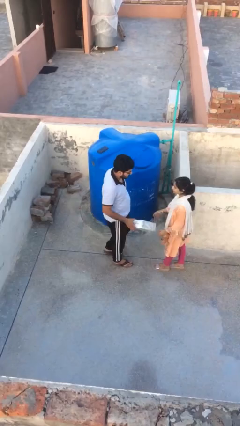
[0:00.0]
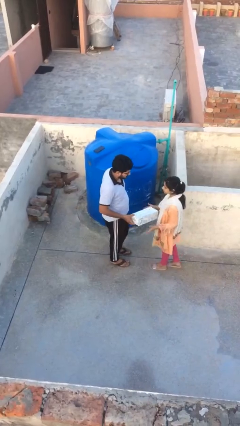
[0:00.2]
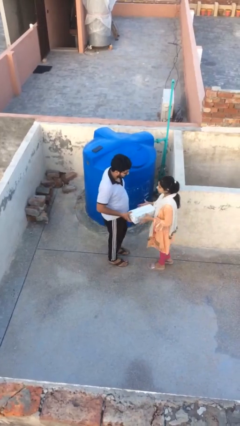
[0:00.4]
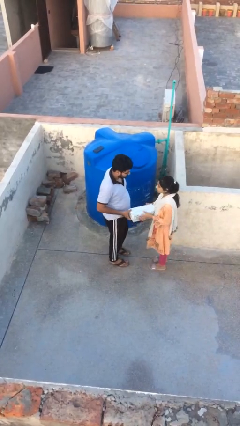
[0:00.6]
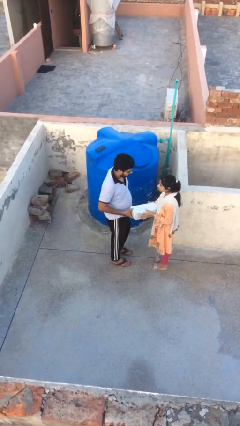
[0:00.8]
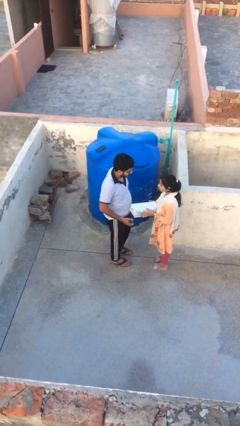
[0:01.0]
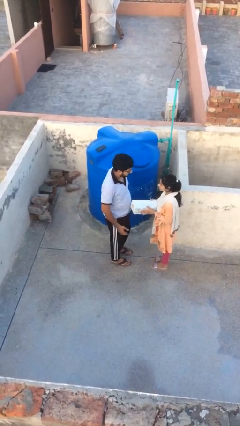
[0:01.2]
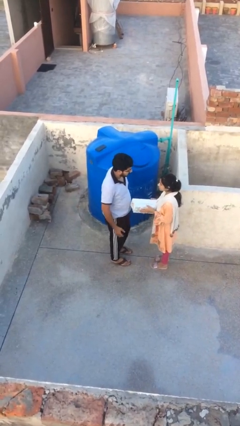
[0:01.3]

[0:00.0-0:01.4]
person transfers object to person

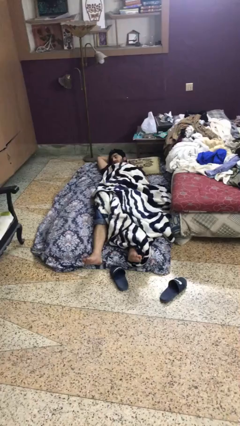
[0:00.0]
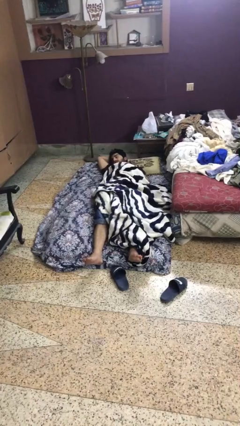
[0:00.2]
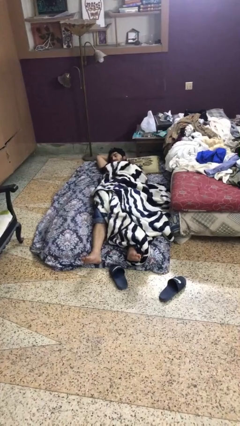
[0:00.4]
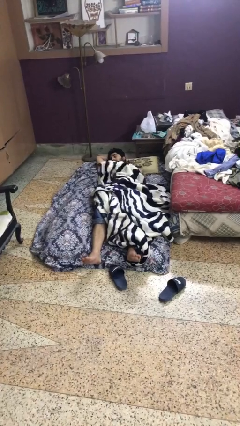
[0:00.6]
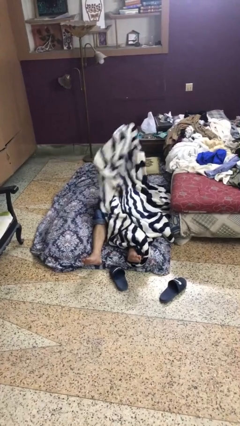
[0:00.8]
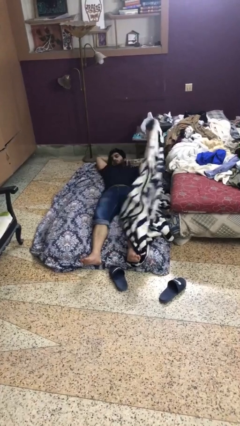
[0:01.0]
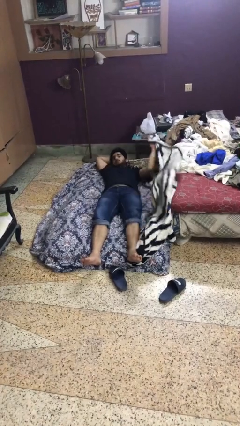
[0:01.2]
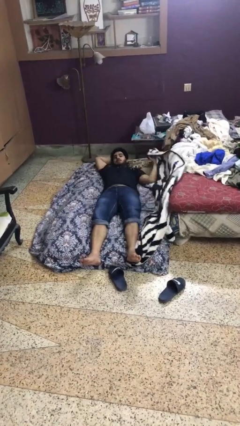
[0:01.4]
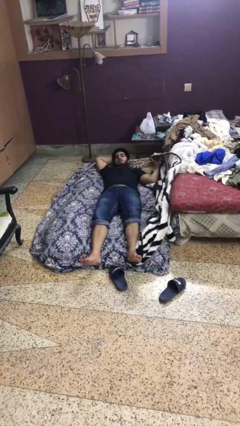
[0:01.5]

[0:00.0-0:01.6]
person uncovers with blanket

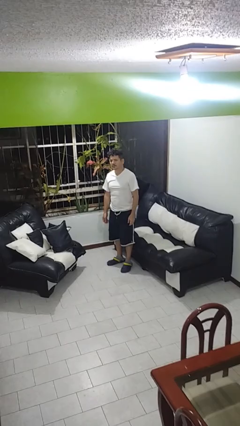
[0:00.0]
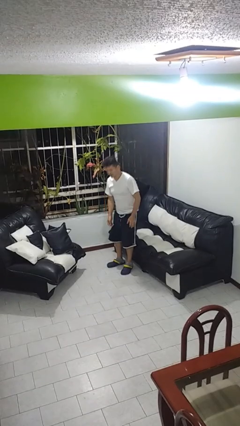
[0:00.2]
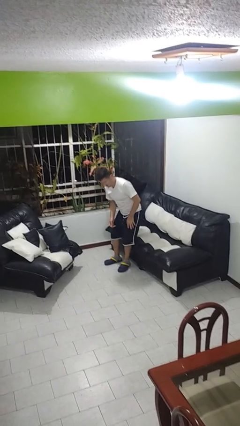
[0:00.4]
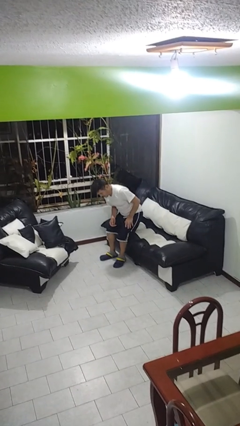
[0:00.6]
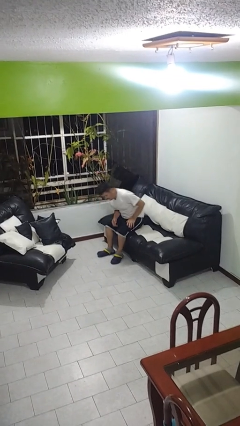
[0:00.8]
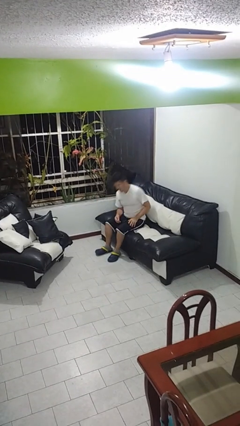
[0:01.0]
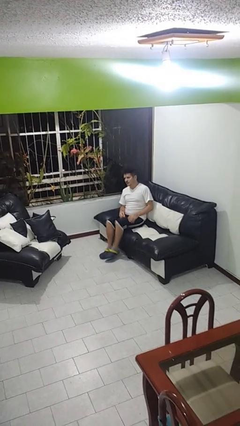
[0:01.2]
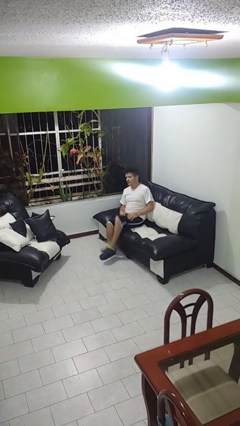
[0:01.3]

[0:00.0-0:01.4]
person lies down on couch

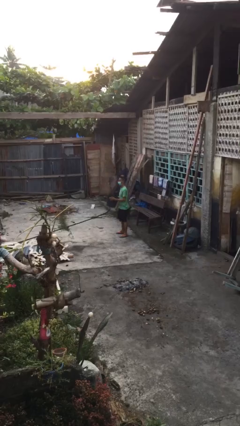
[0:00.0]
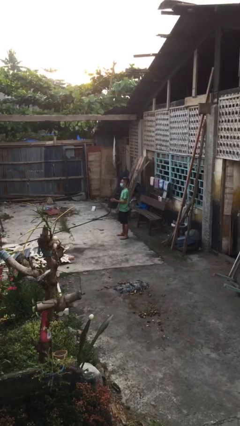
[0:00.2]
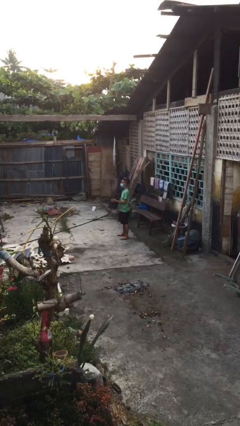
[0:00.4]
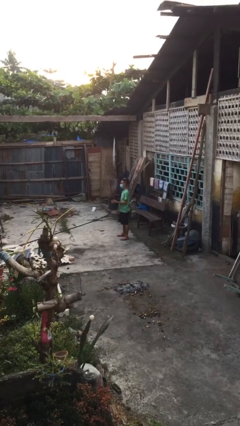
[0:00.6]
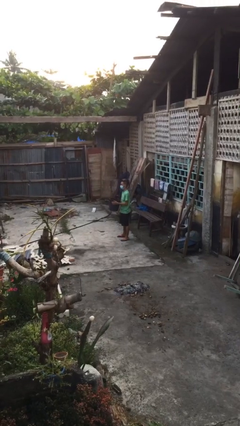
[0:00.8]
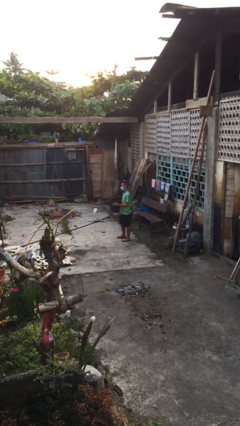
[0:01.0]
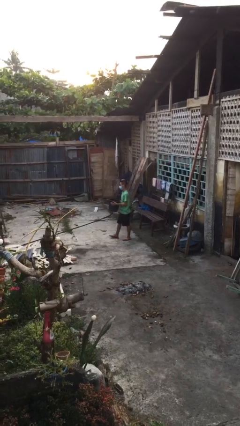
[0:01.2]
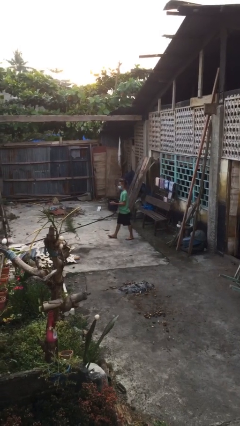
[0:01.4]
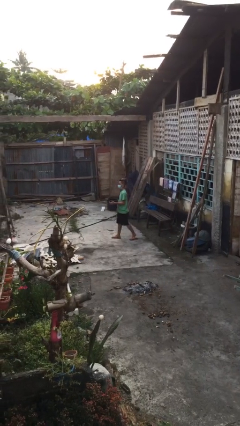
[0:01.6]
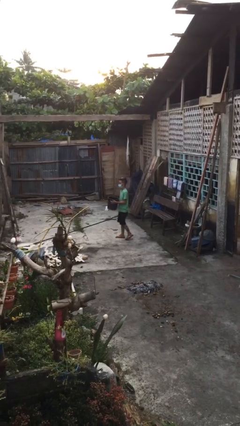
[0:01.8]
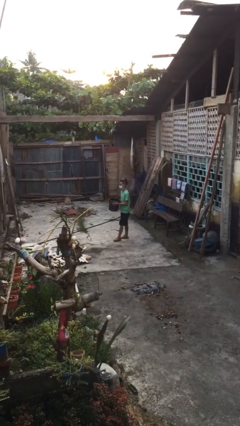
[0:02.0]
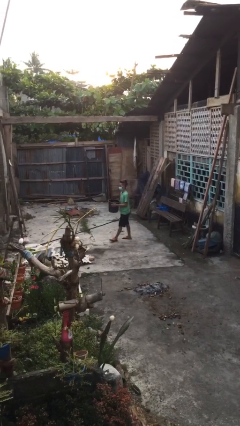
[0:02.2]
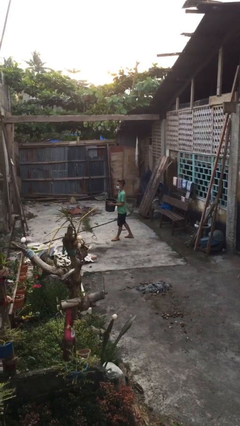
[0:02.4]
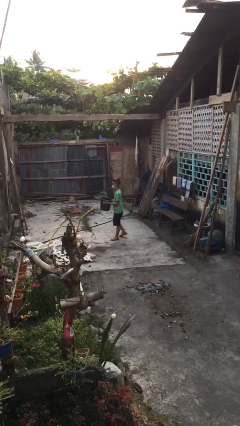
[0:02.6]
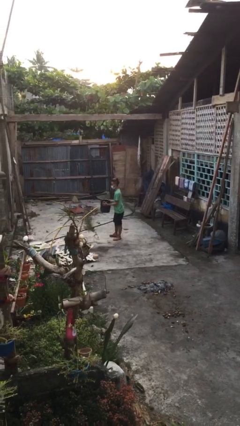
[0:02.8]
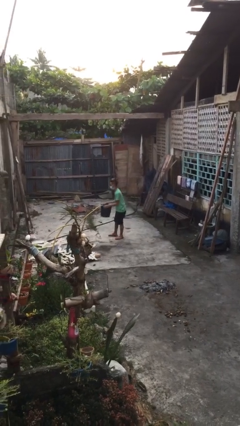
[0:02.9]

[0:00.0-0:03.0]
person carries heavy object

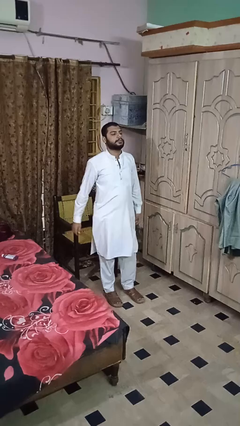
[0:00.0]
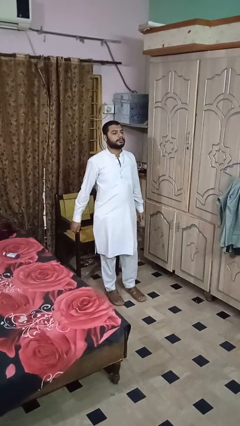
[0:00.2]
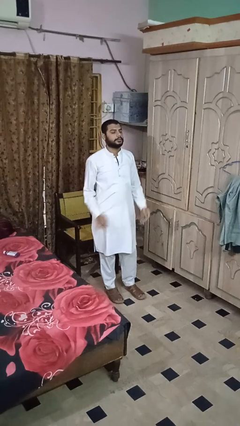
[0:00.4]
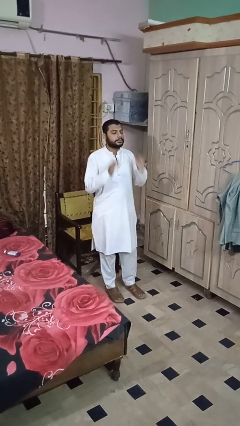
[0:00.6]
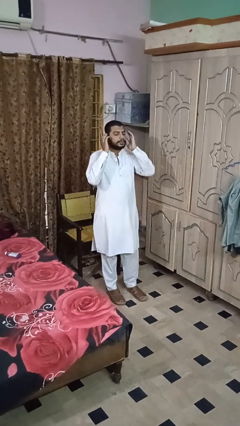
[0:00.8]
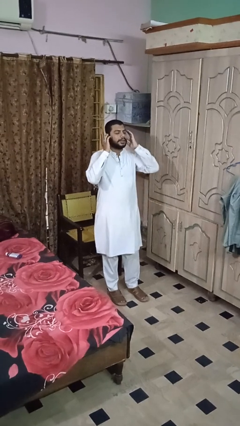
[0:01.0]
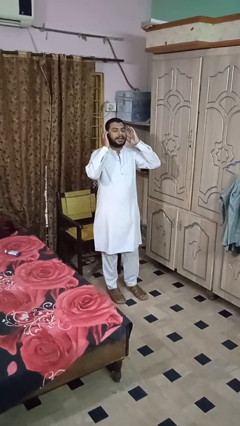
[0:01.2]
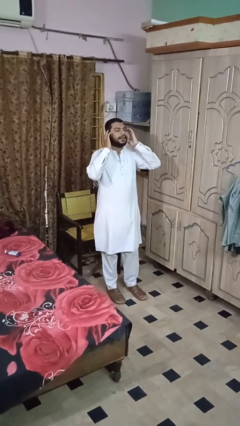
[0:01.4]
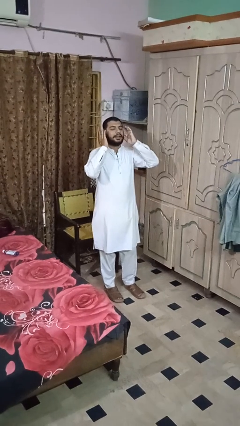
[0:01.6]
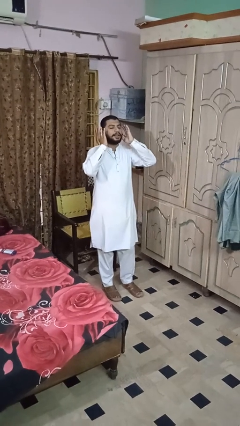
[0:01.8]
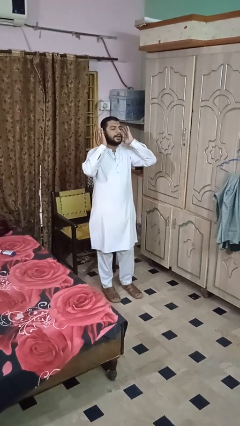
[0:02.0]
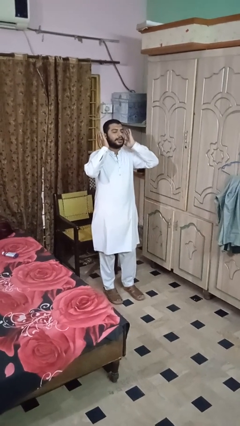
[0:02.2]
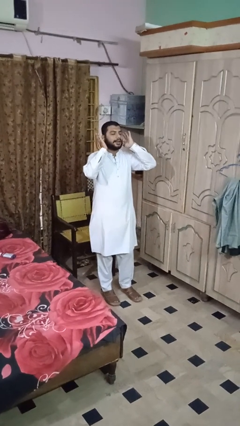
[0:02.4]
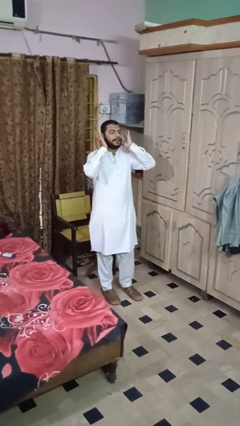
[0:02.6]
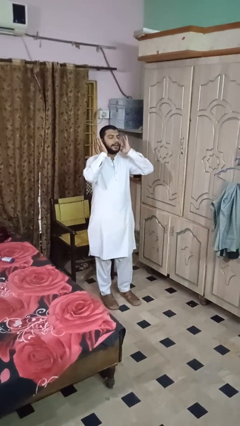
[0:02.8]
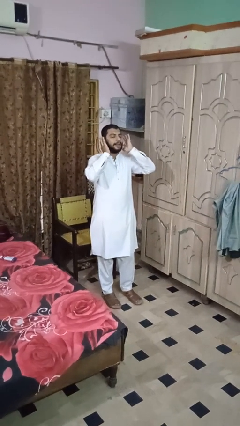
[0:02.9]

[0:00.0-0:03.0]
person puts fingers in ear

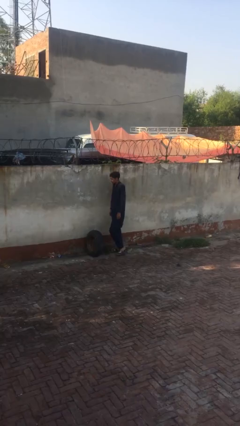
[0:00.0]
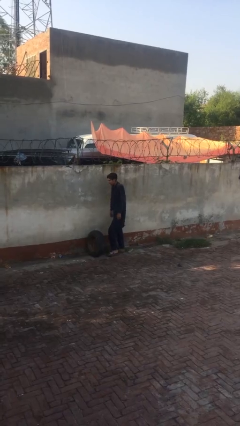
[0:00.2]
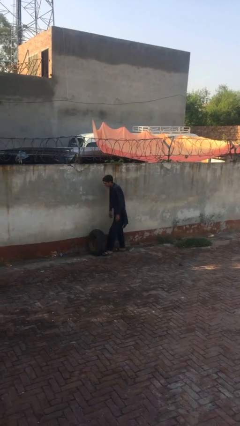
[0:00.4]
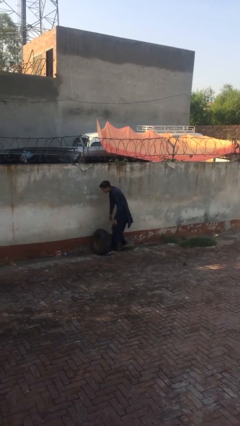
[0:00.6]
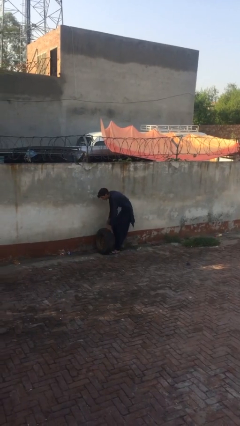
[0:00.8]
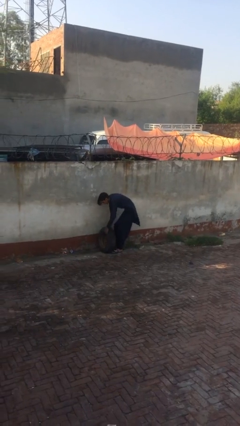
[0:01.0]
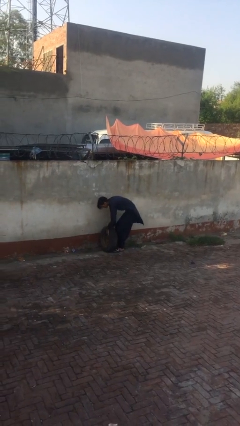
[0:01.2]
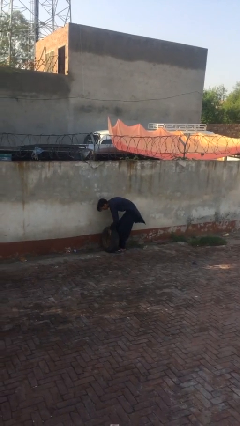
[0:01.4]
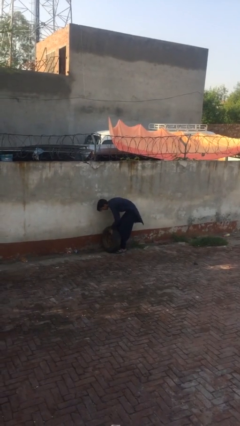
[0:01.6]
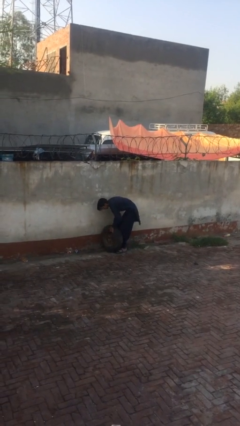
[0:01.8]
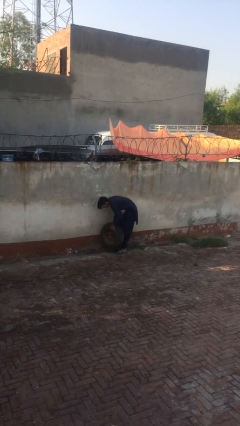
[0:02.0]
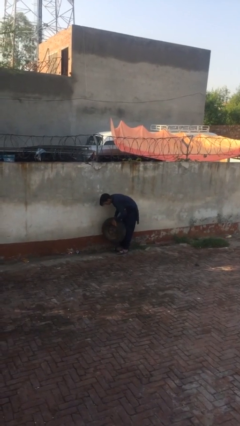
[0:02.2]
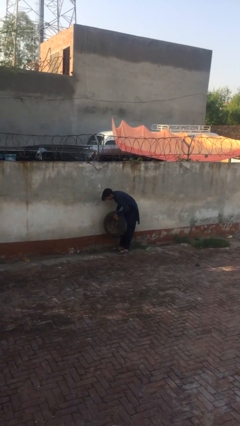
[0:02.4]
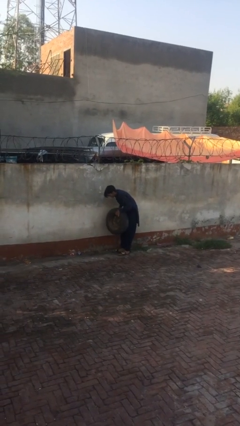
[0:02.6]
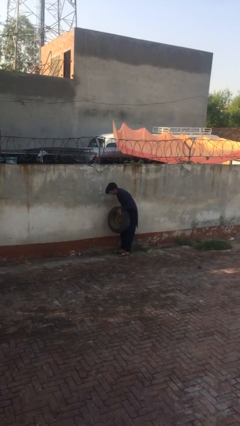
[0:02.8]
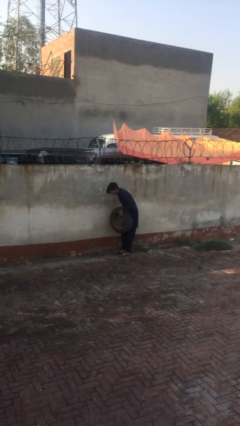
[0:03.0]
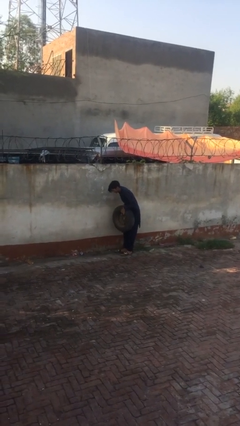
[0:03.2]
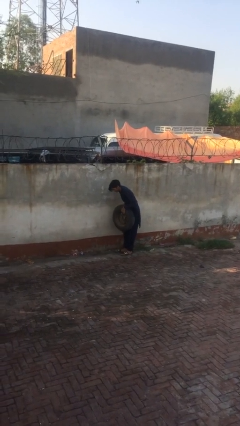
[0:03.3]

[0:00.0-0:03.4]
person picks up object from floor

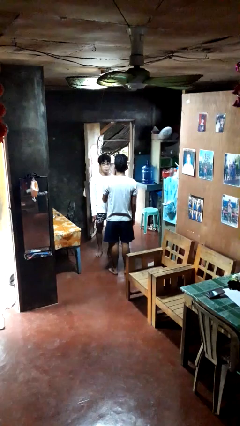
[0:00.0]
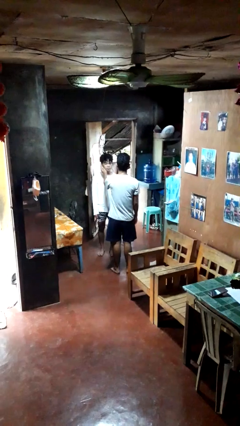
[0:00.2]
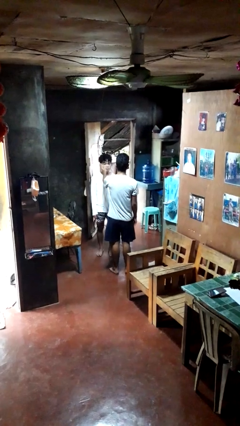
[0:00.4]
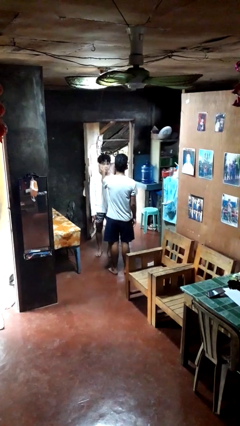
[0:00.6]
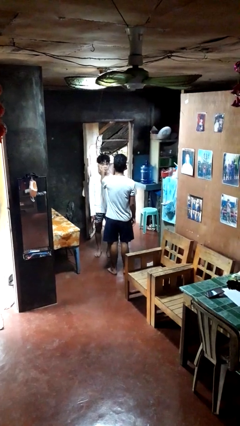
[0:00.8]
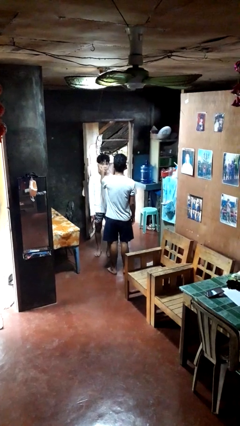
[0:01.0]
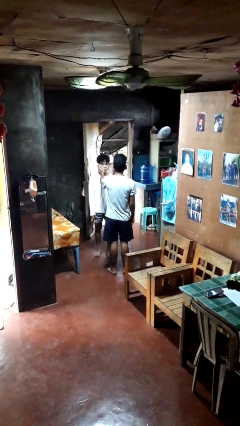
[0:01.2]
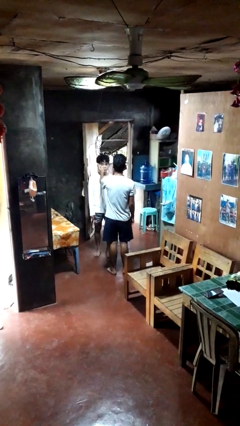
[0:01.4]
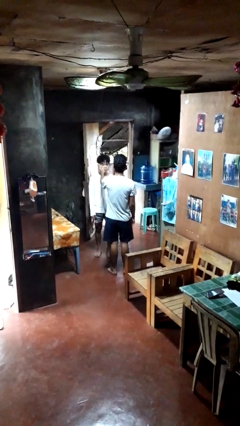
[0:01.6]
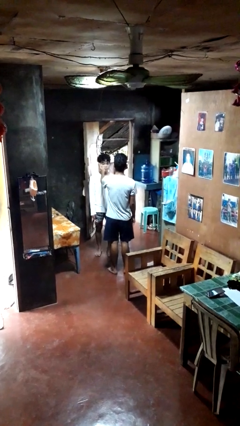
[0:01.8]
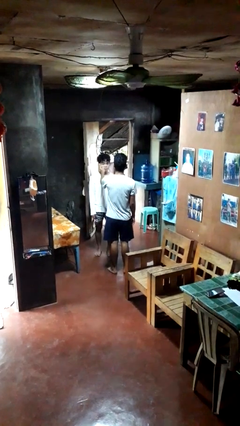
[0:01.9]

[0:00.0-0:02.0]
person touches face of person

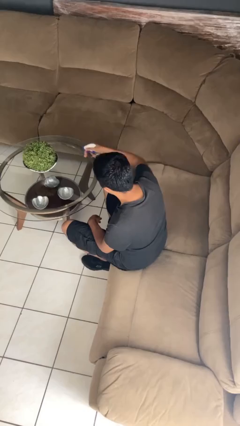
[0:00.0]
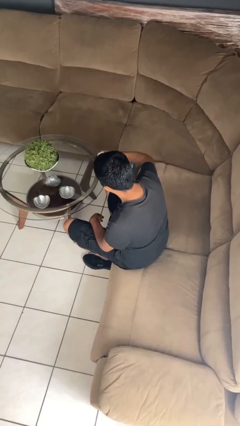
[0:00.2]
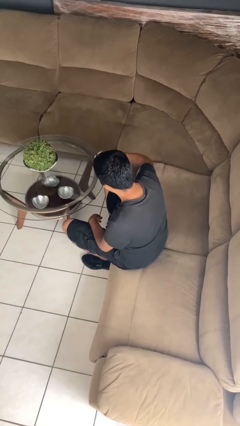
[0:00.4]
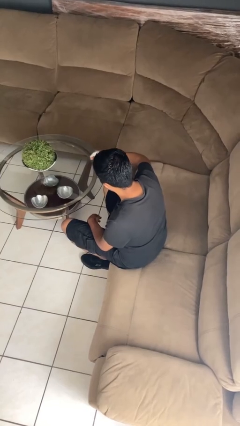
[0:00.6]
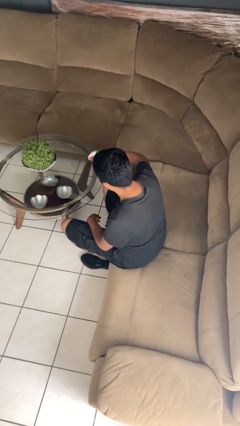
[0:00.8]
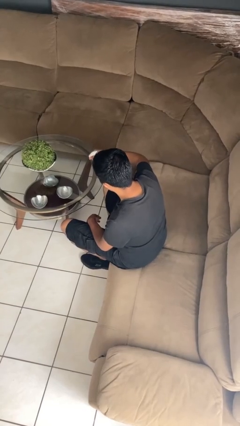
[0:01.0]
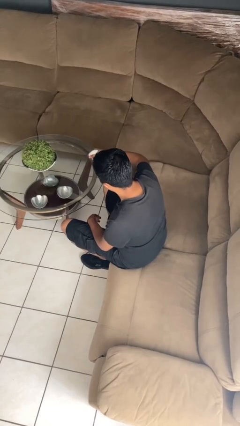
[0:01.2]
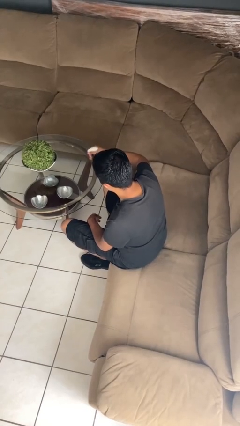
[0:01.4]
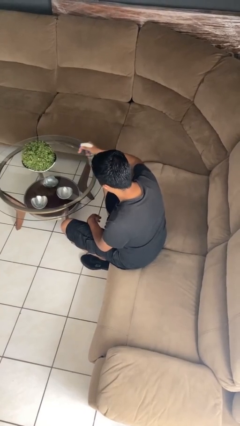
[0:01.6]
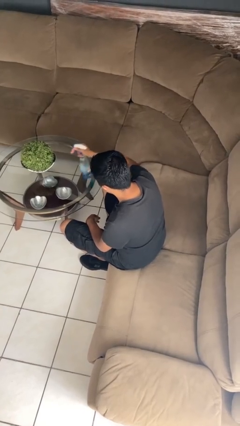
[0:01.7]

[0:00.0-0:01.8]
person sprays from bottle
